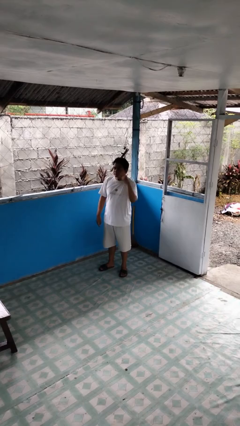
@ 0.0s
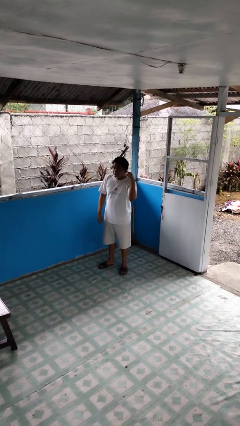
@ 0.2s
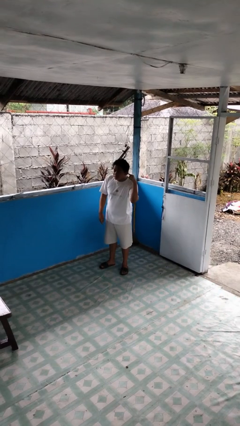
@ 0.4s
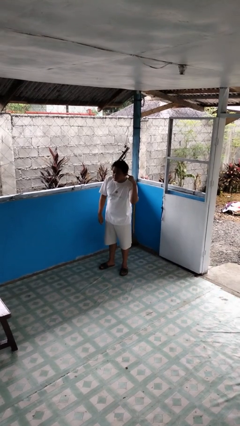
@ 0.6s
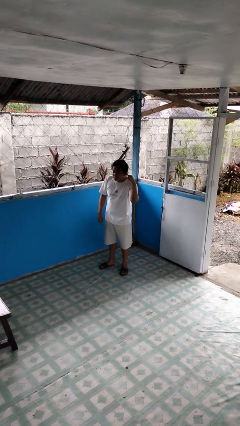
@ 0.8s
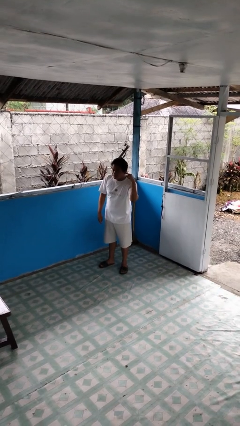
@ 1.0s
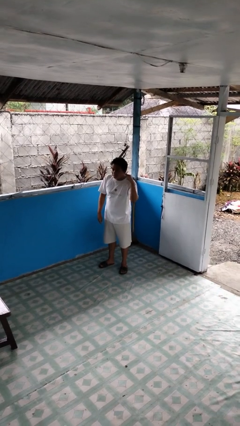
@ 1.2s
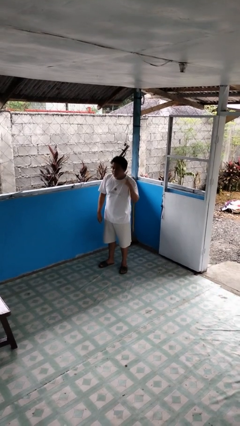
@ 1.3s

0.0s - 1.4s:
person gestures listen closely

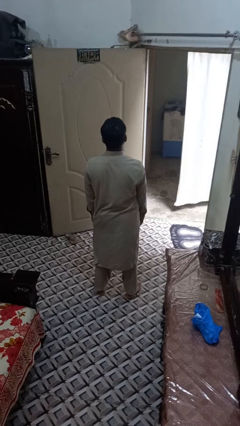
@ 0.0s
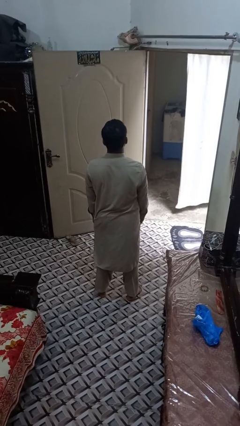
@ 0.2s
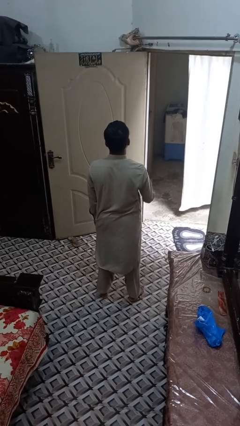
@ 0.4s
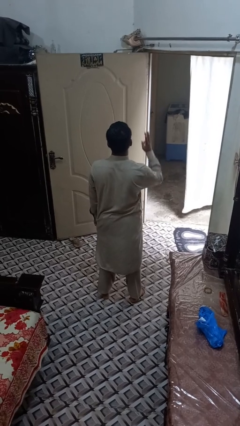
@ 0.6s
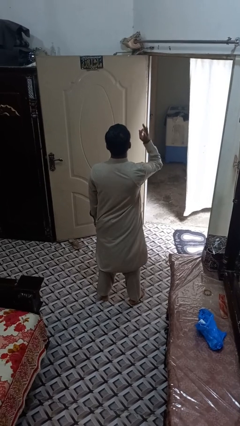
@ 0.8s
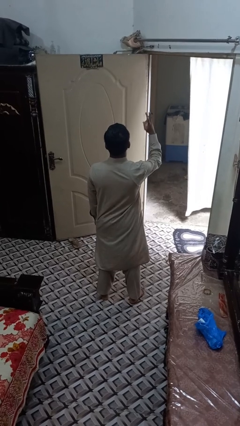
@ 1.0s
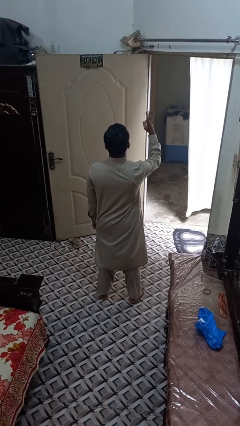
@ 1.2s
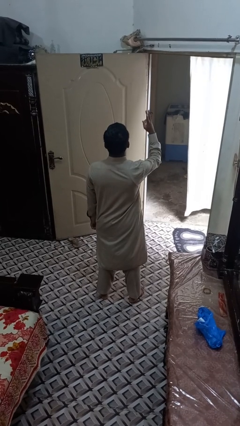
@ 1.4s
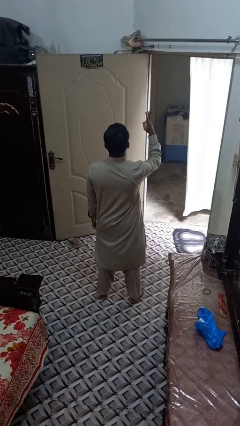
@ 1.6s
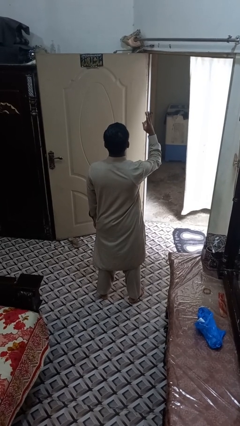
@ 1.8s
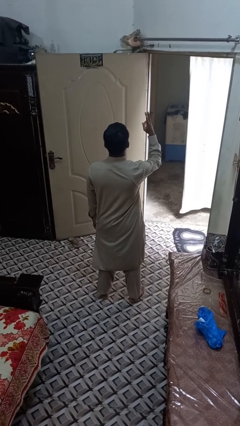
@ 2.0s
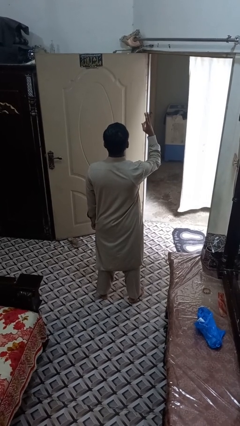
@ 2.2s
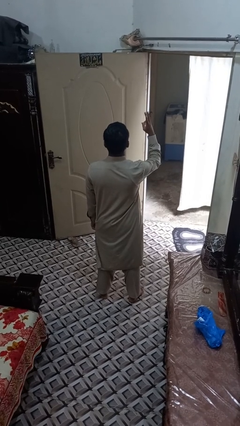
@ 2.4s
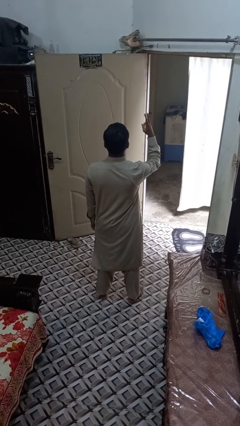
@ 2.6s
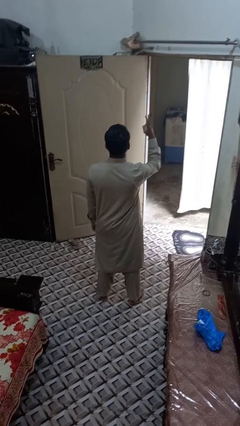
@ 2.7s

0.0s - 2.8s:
person gestures number three

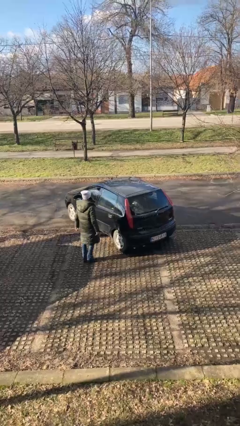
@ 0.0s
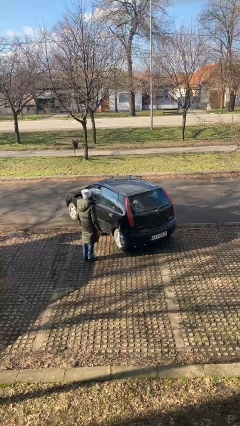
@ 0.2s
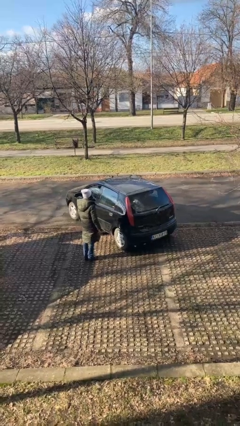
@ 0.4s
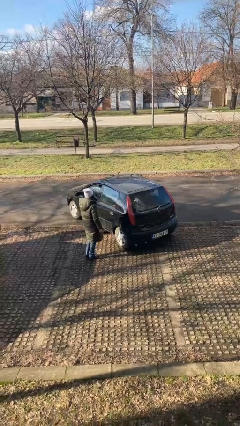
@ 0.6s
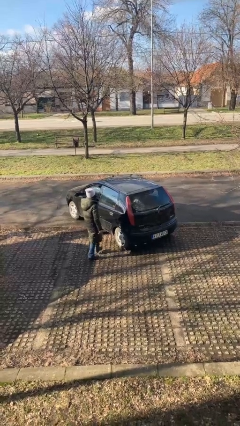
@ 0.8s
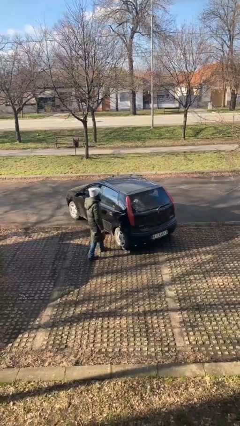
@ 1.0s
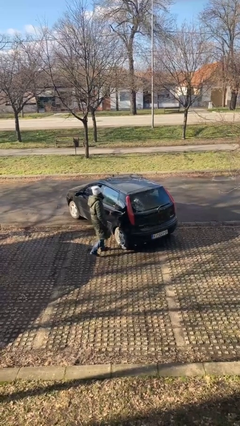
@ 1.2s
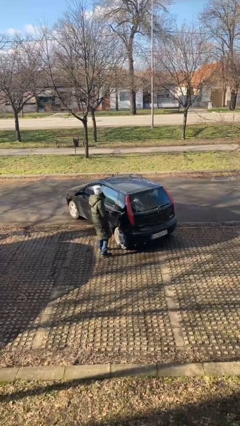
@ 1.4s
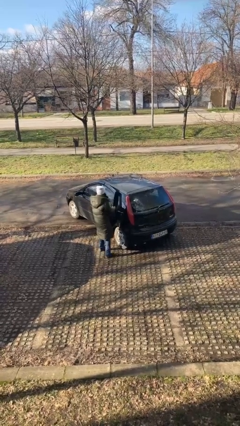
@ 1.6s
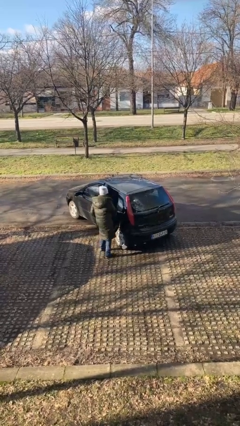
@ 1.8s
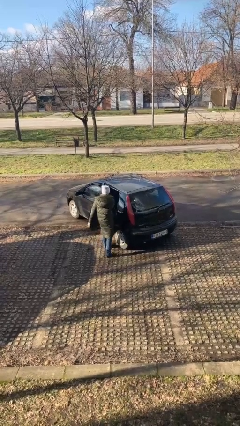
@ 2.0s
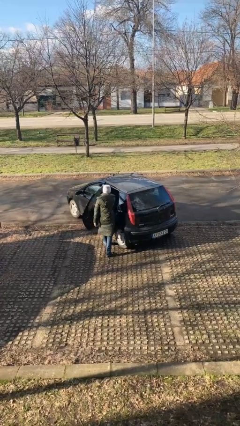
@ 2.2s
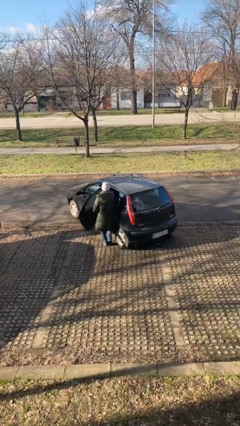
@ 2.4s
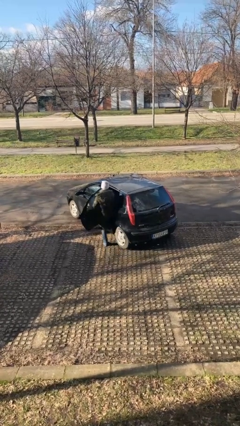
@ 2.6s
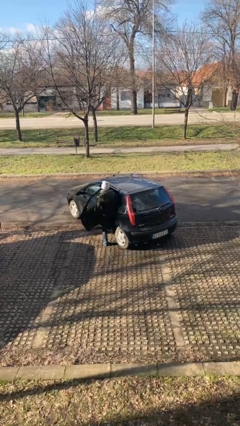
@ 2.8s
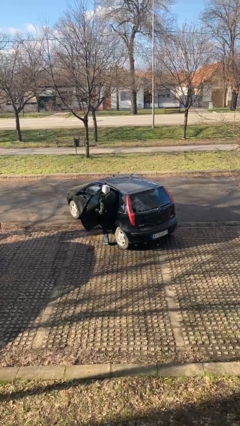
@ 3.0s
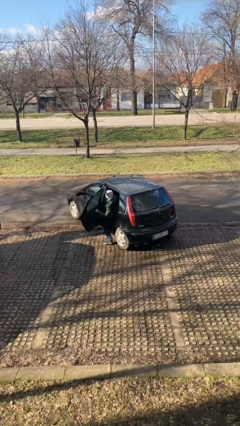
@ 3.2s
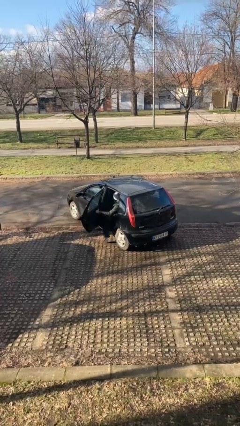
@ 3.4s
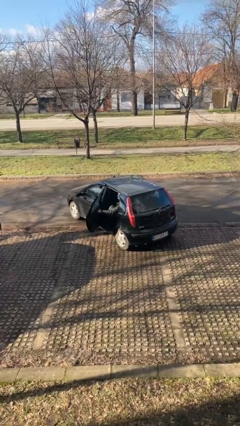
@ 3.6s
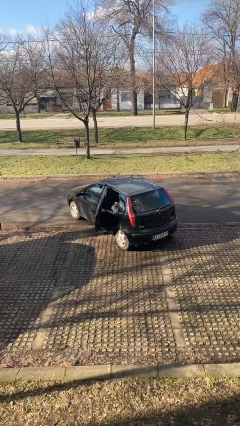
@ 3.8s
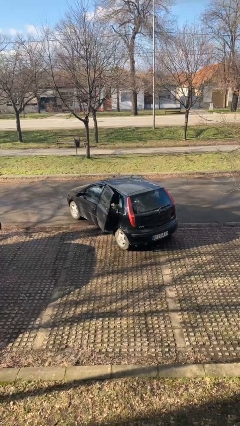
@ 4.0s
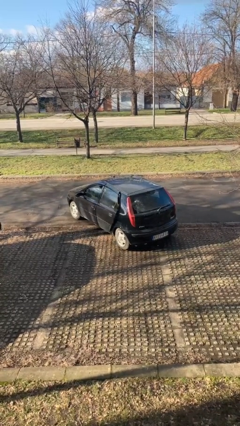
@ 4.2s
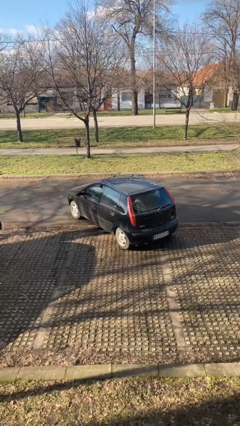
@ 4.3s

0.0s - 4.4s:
car picks up person

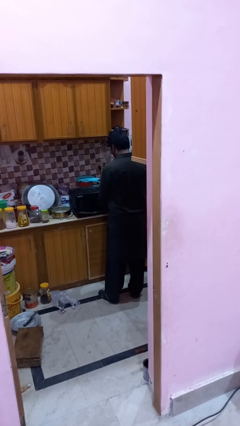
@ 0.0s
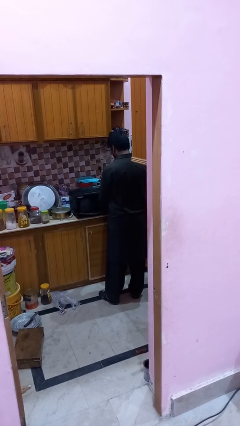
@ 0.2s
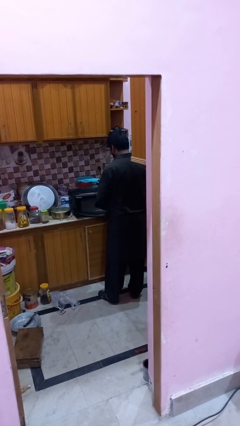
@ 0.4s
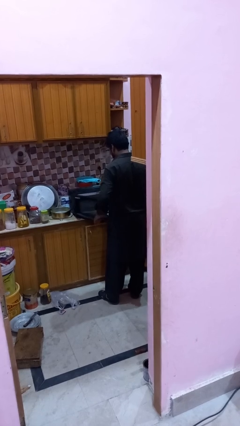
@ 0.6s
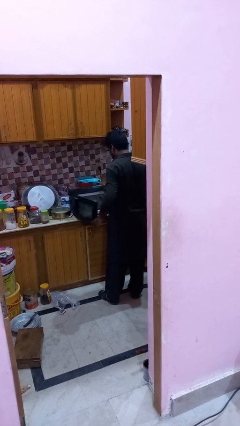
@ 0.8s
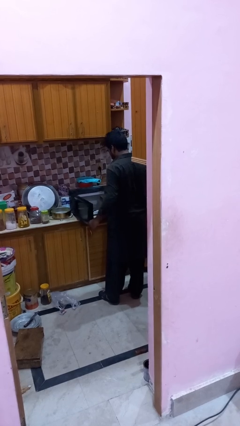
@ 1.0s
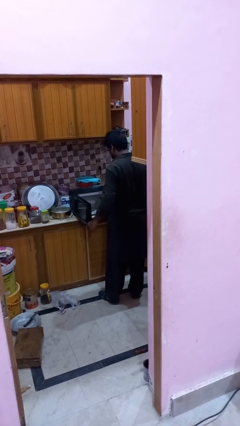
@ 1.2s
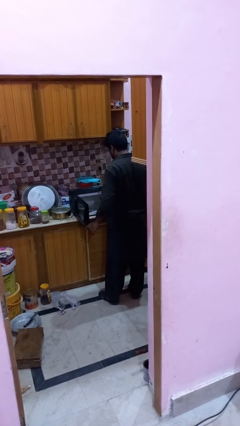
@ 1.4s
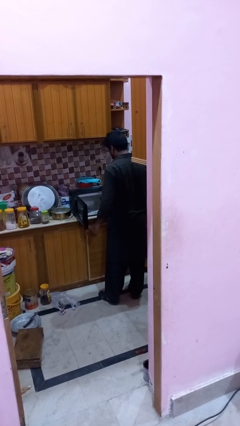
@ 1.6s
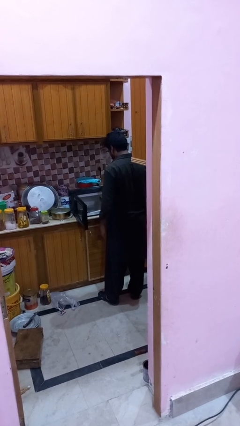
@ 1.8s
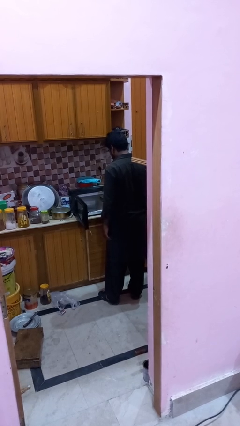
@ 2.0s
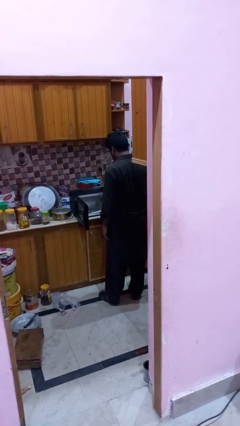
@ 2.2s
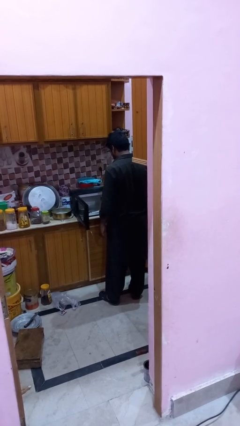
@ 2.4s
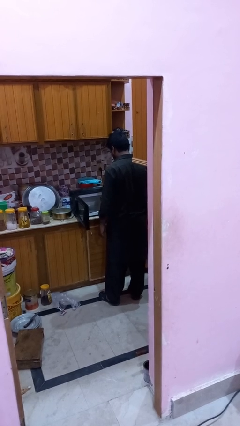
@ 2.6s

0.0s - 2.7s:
person opens oven door

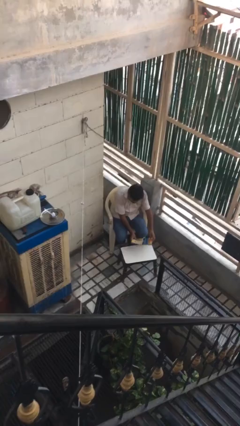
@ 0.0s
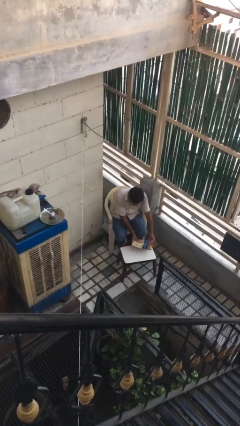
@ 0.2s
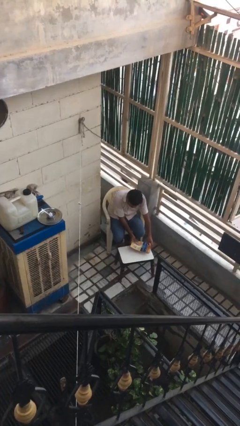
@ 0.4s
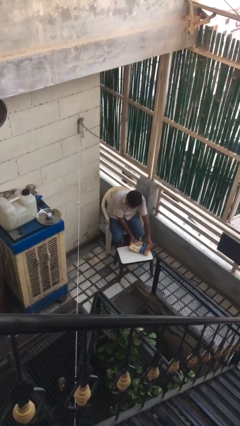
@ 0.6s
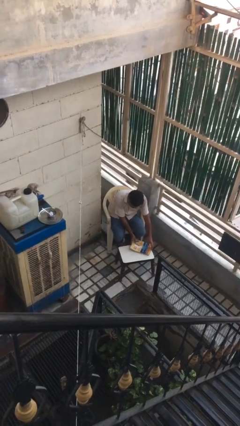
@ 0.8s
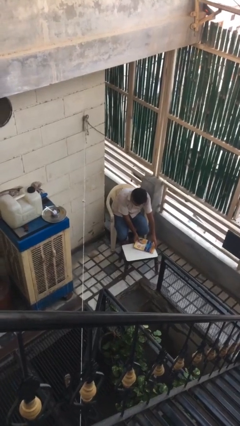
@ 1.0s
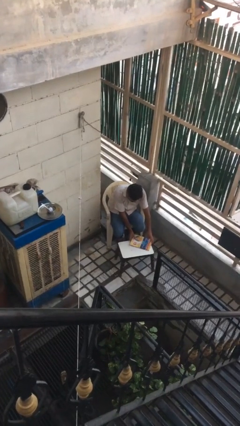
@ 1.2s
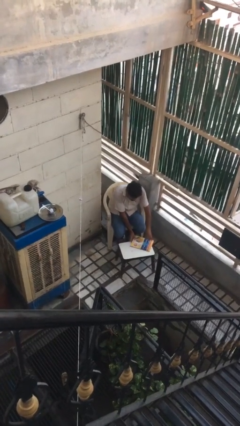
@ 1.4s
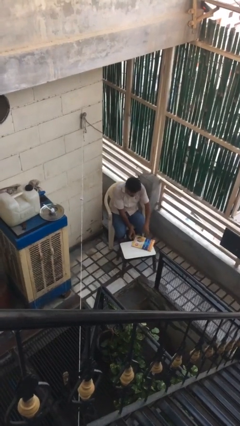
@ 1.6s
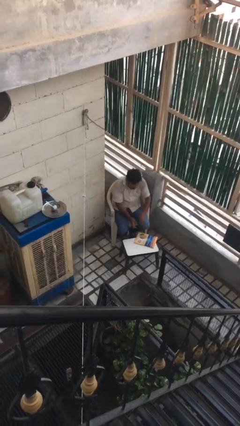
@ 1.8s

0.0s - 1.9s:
person puts down object on table

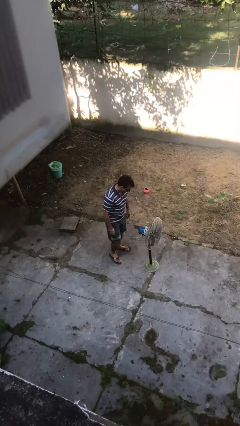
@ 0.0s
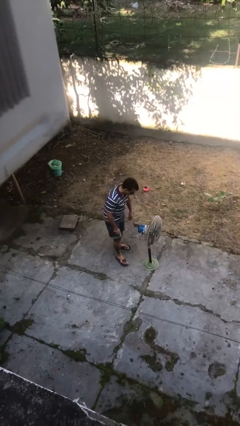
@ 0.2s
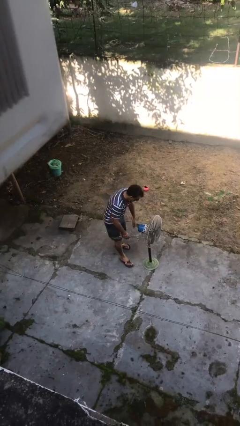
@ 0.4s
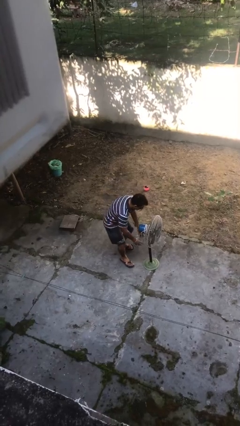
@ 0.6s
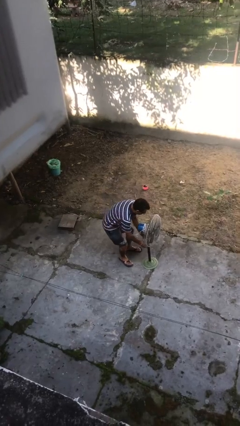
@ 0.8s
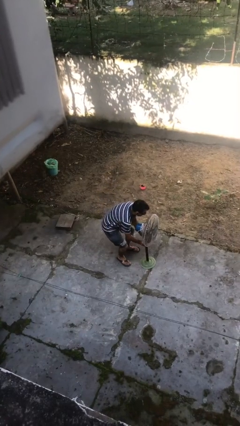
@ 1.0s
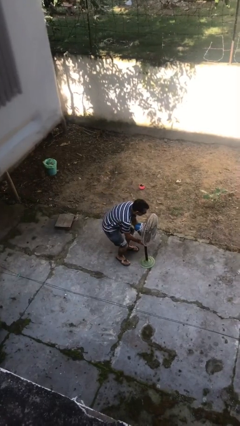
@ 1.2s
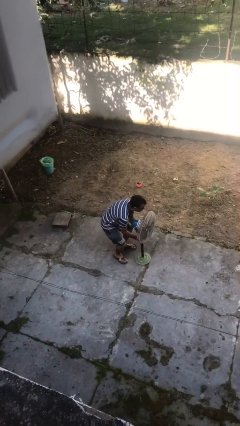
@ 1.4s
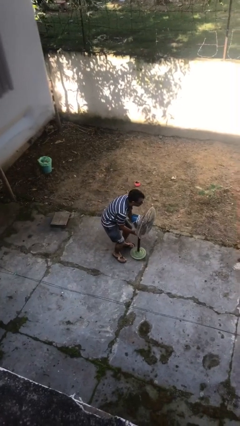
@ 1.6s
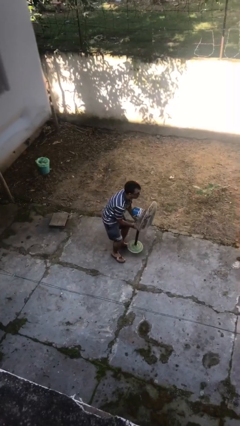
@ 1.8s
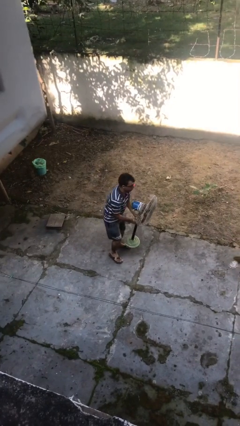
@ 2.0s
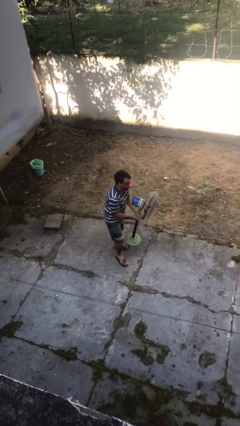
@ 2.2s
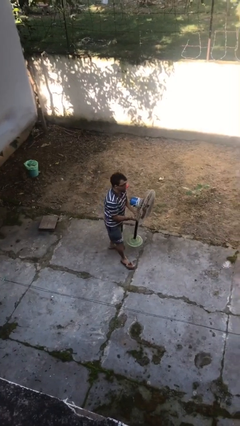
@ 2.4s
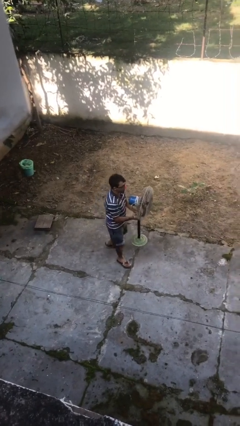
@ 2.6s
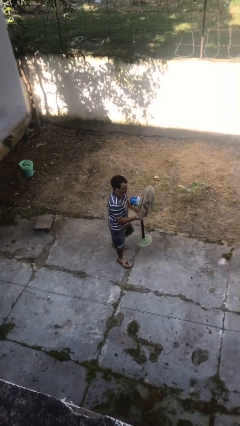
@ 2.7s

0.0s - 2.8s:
person picks up object from floor

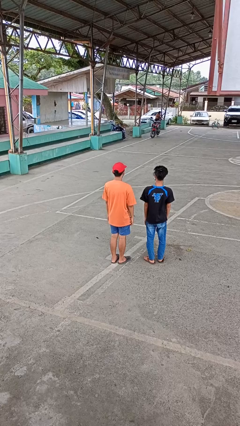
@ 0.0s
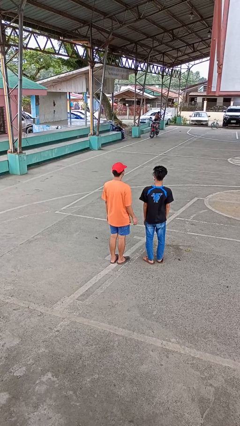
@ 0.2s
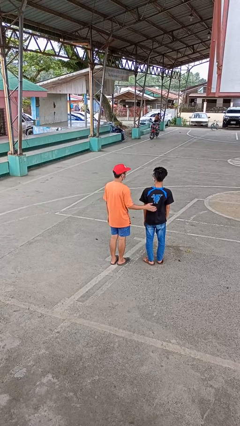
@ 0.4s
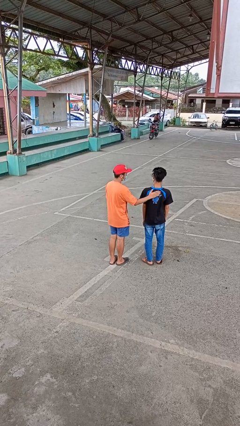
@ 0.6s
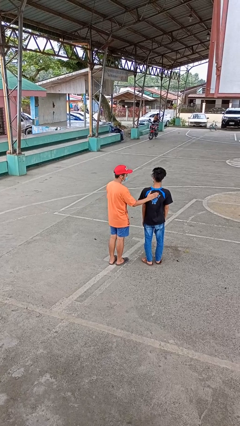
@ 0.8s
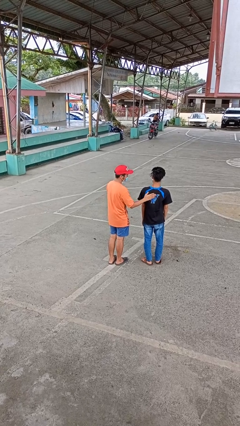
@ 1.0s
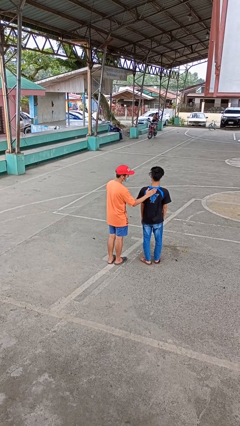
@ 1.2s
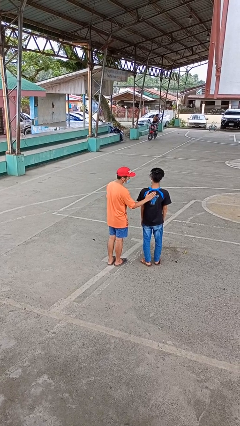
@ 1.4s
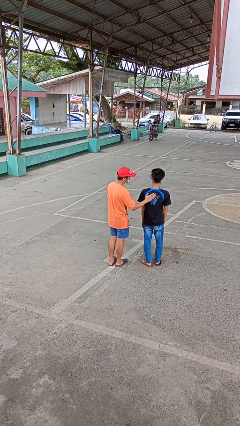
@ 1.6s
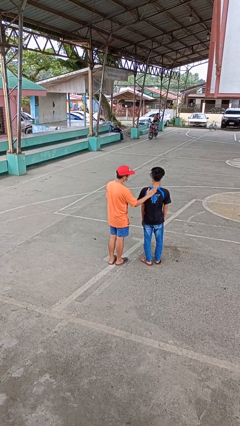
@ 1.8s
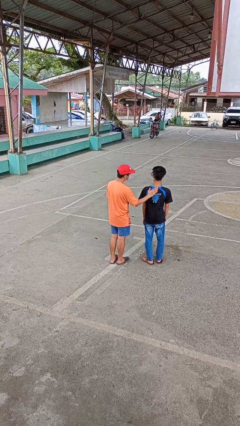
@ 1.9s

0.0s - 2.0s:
person touches back of person
